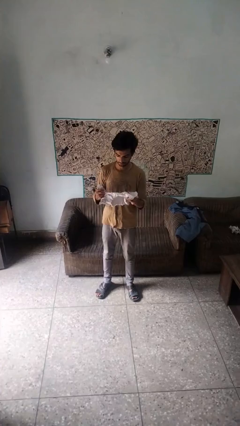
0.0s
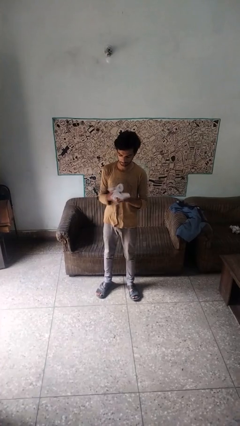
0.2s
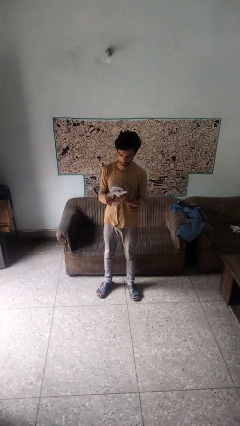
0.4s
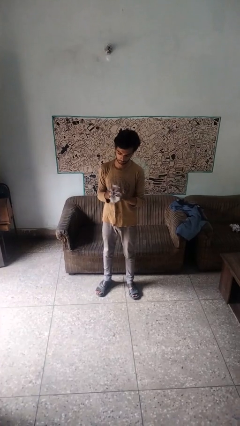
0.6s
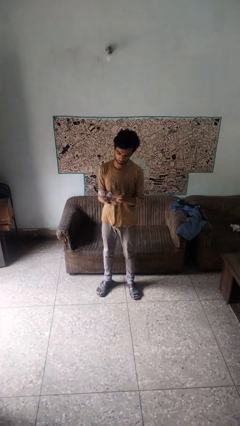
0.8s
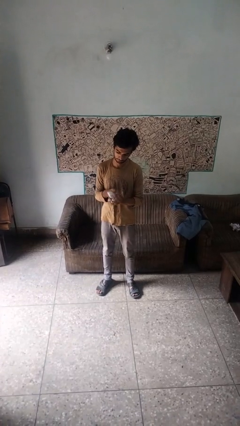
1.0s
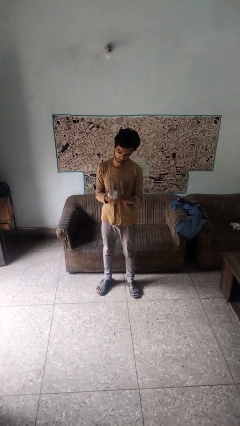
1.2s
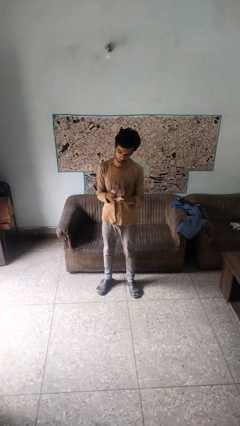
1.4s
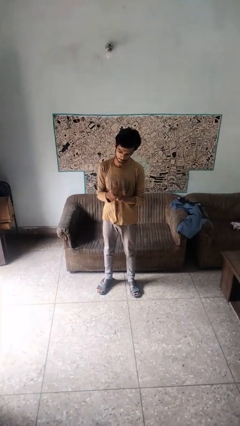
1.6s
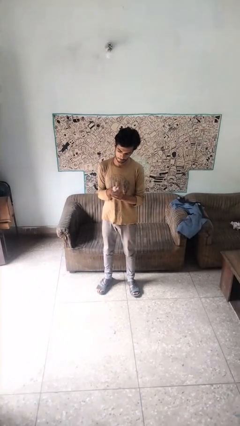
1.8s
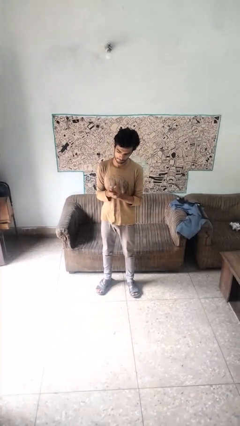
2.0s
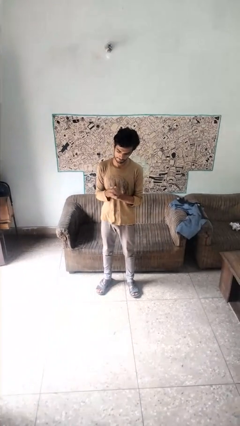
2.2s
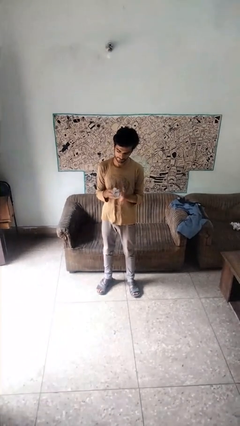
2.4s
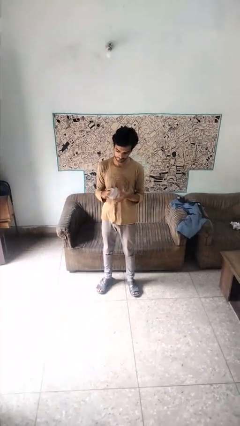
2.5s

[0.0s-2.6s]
person crumples paper

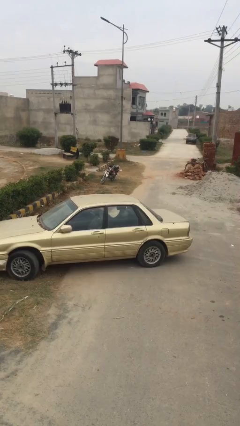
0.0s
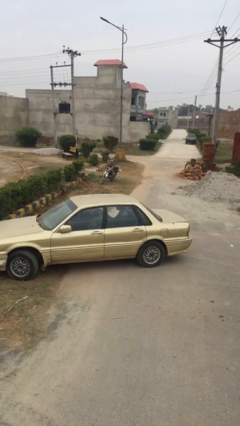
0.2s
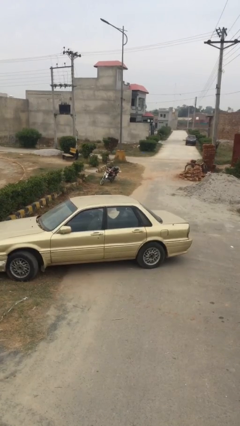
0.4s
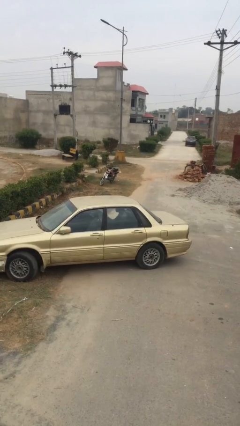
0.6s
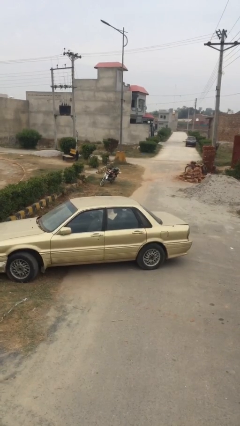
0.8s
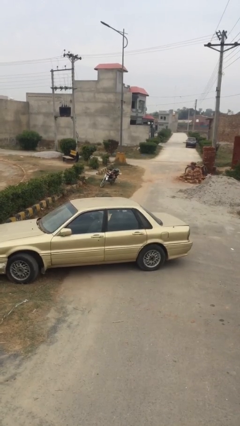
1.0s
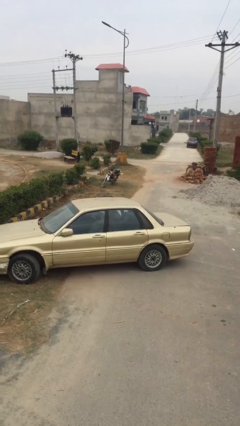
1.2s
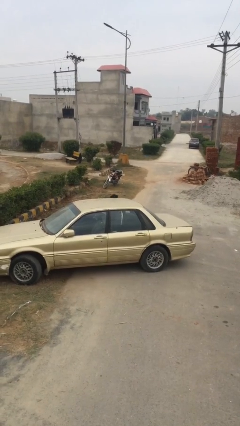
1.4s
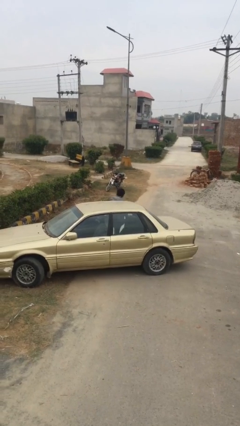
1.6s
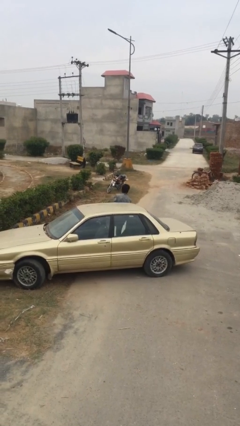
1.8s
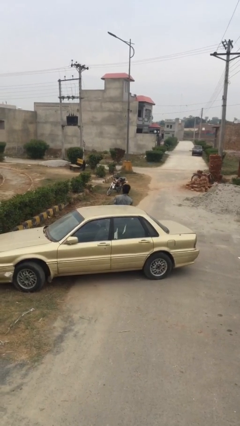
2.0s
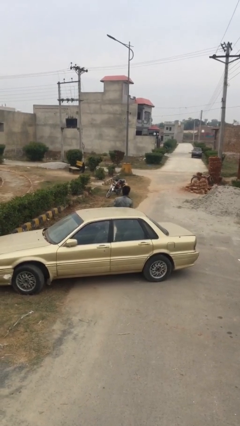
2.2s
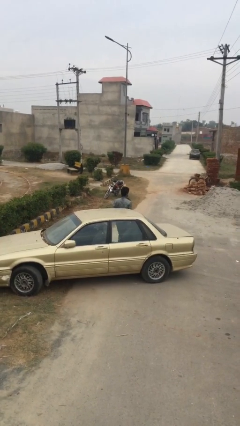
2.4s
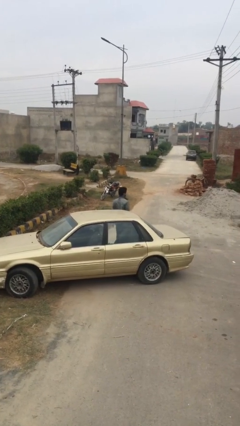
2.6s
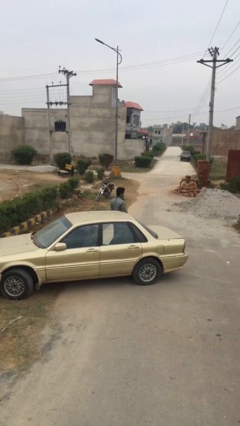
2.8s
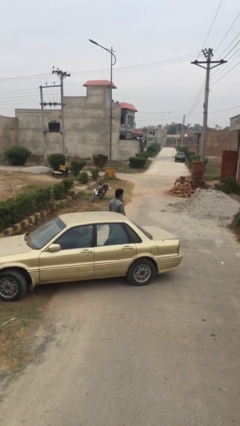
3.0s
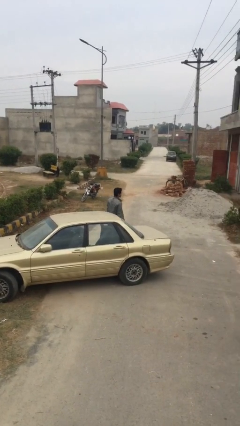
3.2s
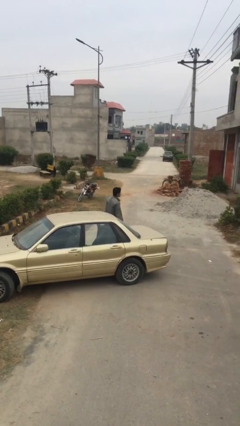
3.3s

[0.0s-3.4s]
person exits car

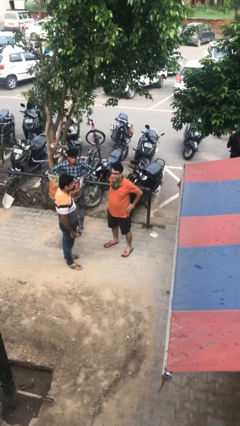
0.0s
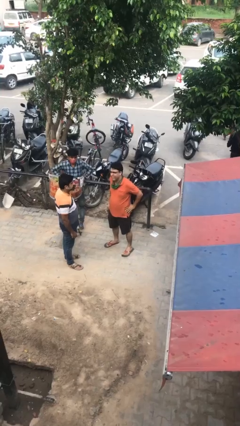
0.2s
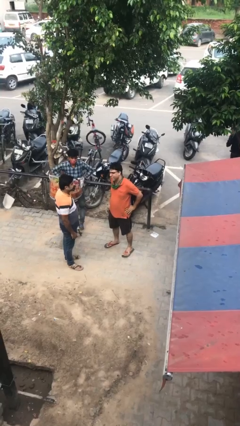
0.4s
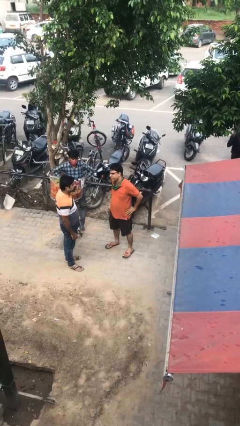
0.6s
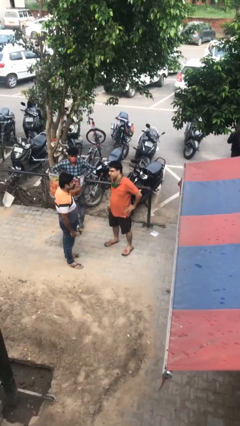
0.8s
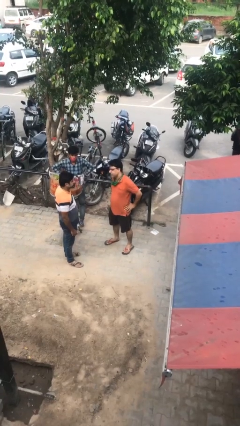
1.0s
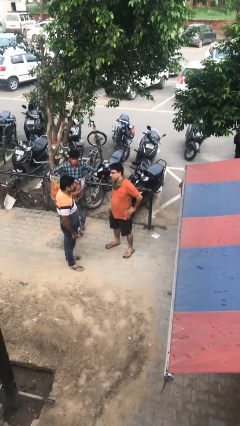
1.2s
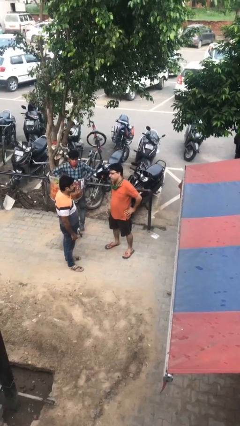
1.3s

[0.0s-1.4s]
person laughs with person

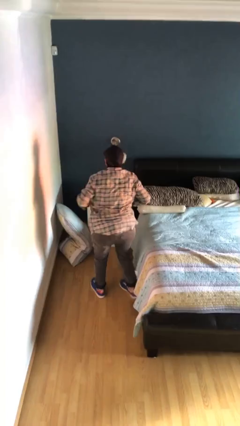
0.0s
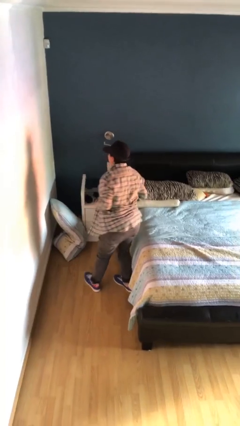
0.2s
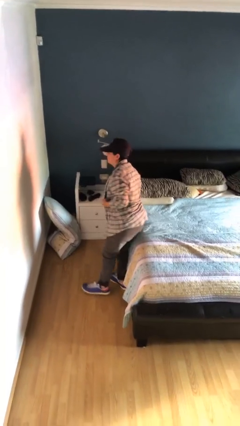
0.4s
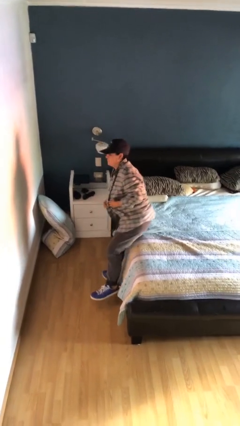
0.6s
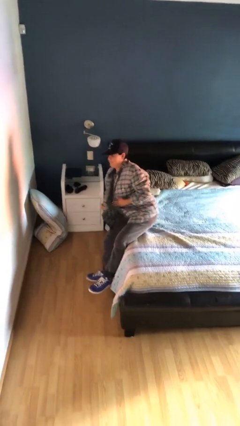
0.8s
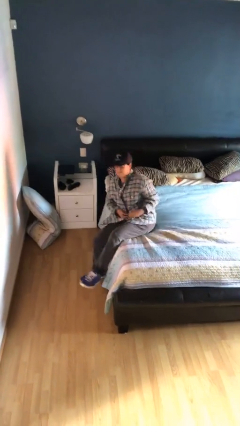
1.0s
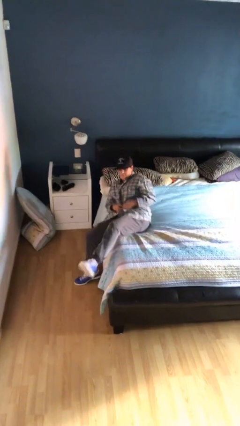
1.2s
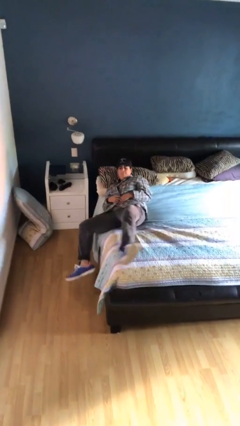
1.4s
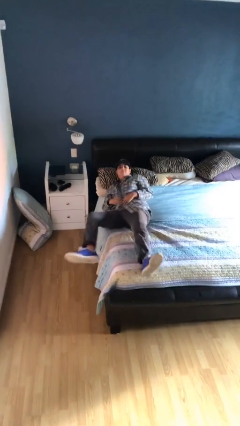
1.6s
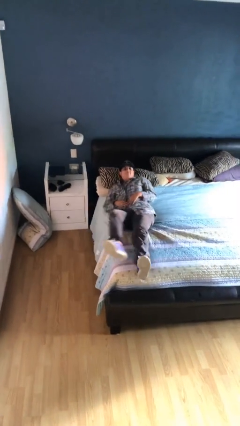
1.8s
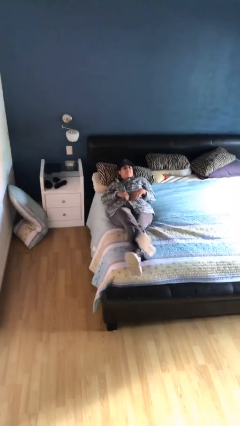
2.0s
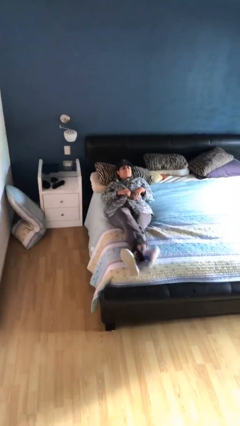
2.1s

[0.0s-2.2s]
person lies down on bed

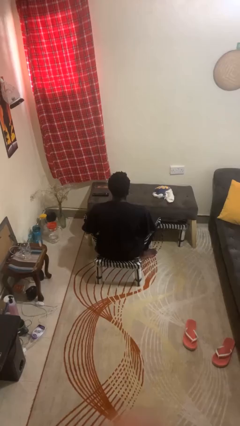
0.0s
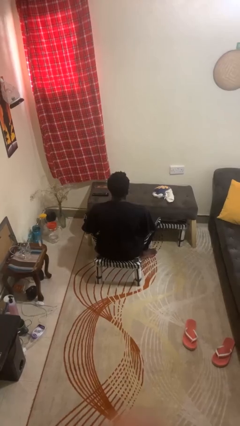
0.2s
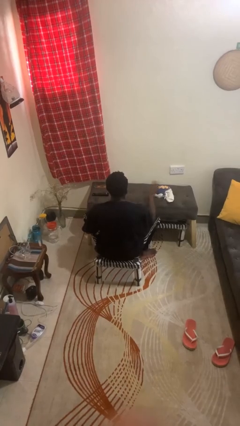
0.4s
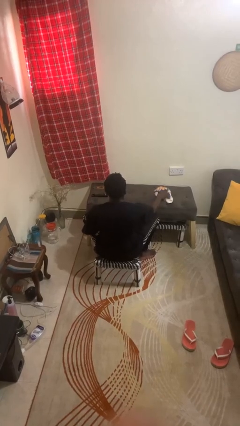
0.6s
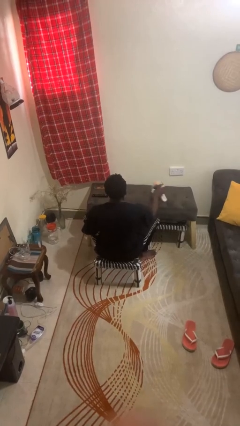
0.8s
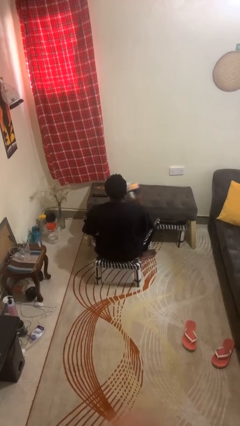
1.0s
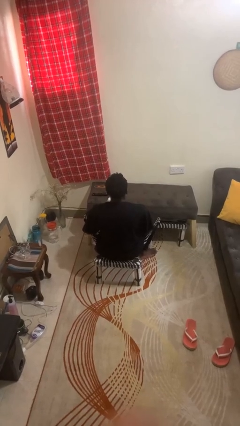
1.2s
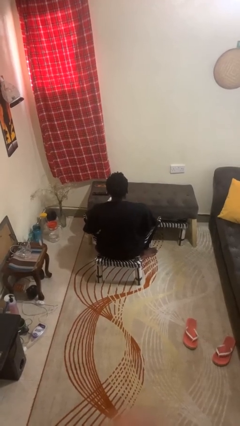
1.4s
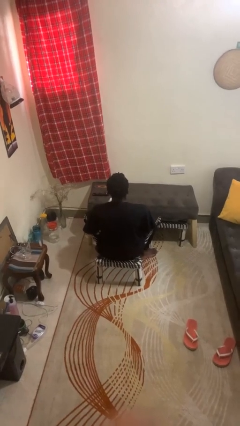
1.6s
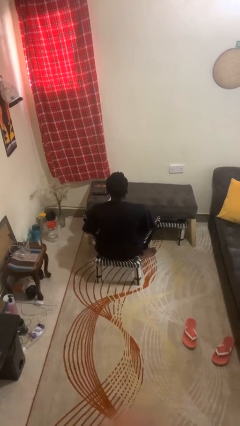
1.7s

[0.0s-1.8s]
person picks up object from table

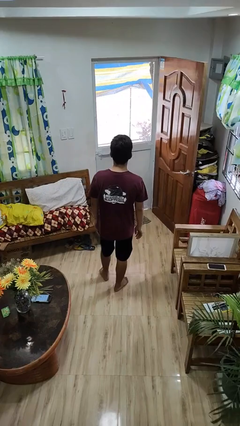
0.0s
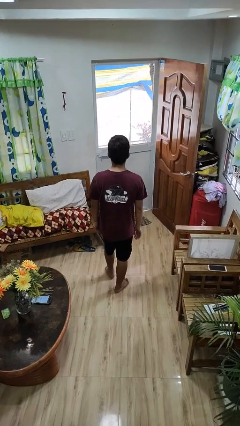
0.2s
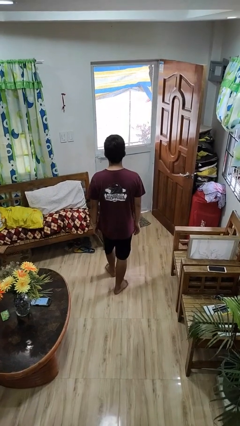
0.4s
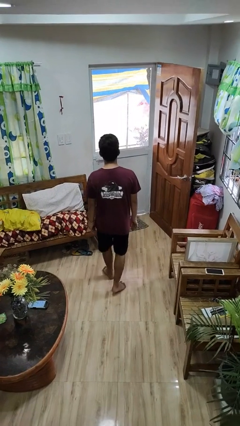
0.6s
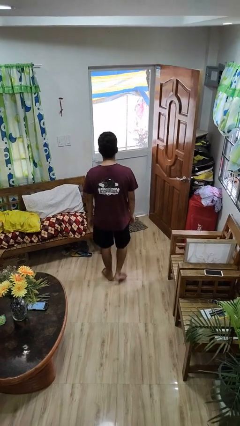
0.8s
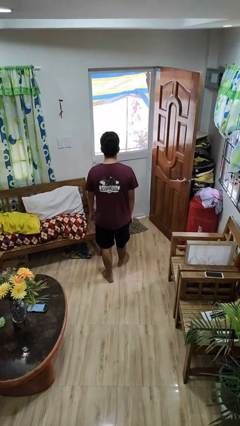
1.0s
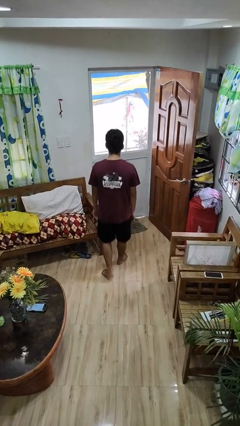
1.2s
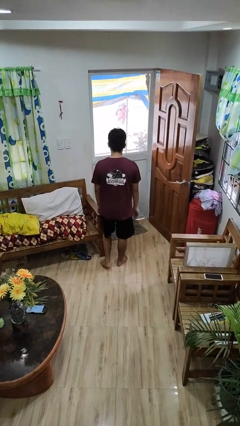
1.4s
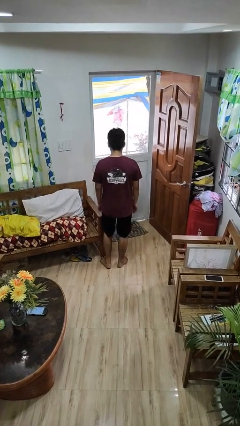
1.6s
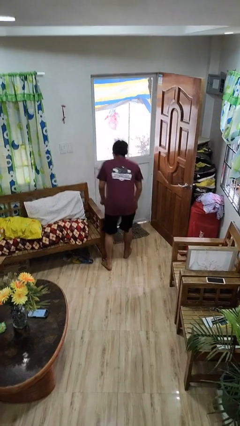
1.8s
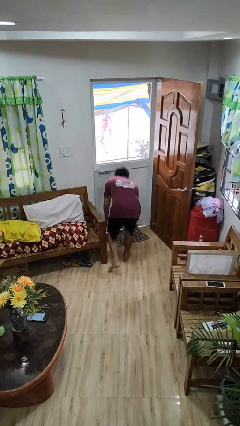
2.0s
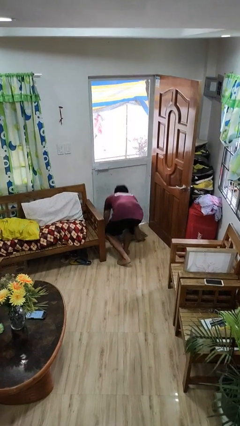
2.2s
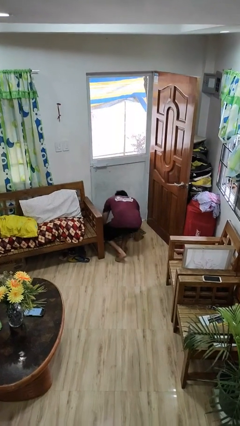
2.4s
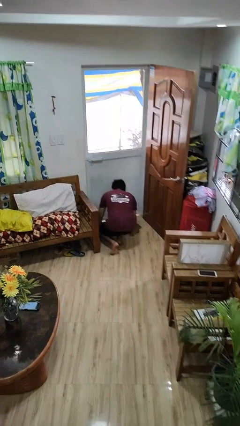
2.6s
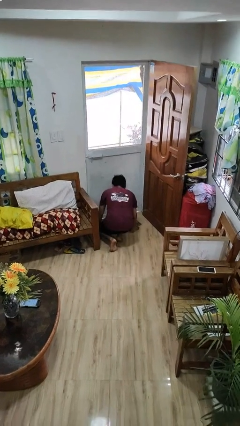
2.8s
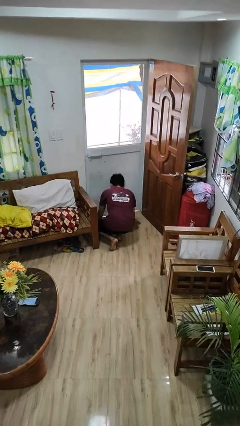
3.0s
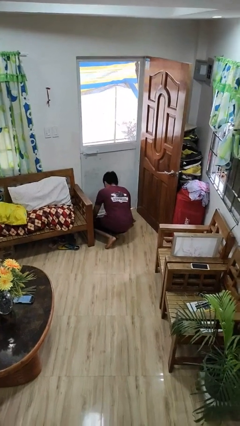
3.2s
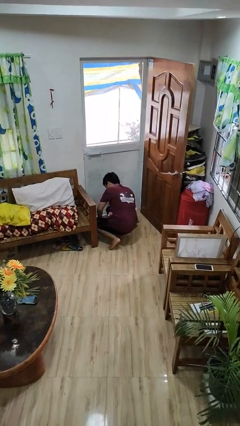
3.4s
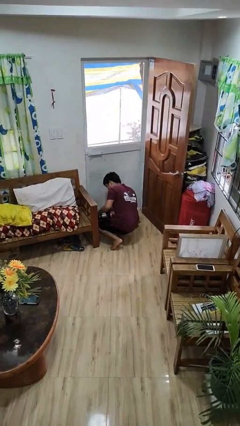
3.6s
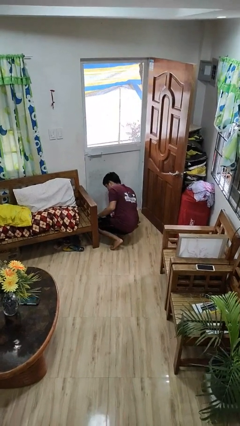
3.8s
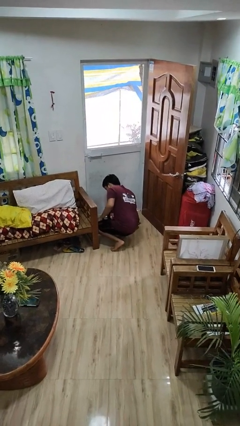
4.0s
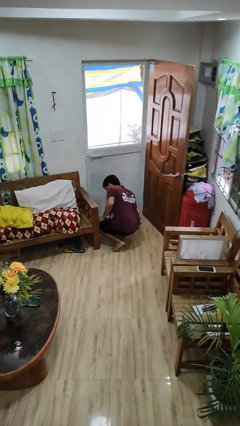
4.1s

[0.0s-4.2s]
person trips on object on floor

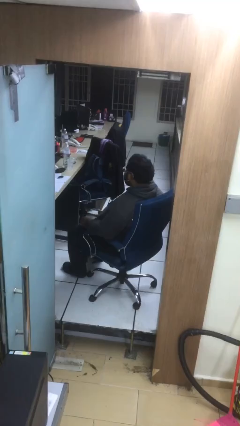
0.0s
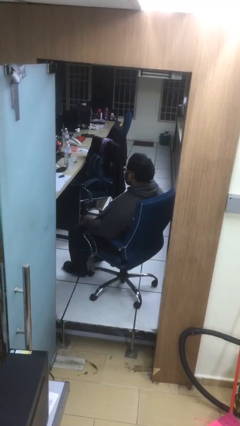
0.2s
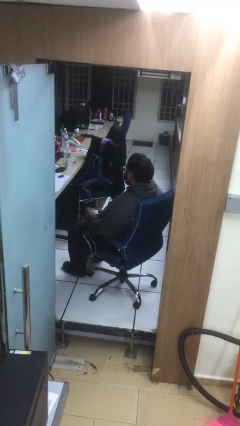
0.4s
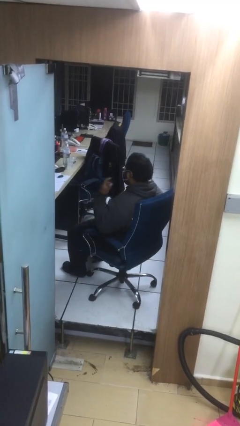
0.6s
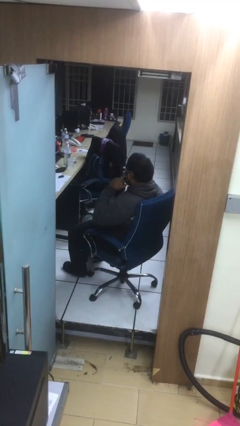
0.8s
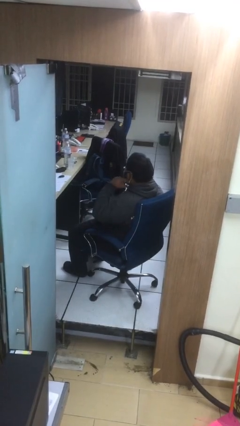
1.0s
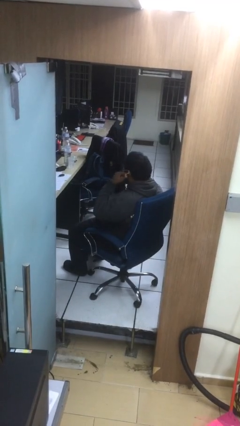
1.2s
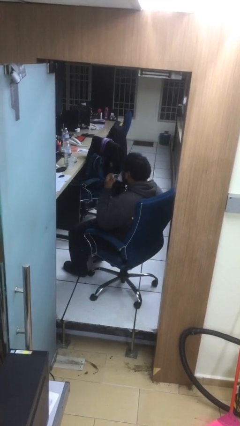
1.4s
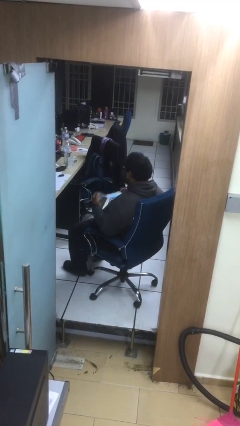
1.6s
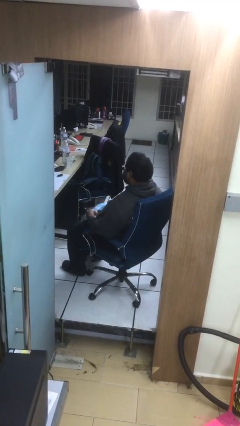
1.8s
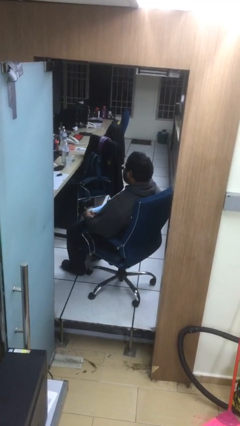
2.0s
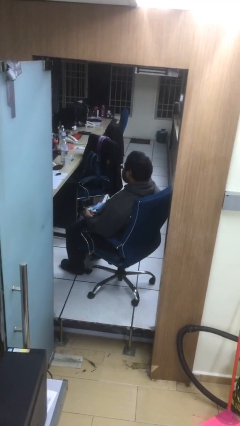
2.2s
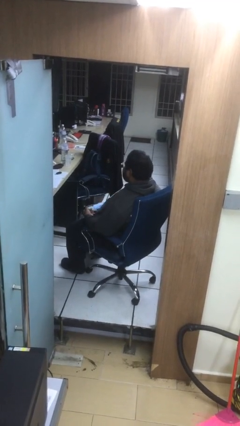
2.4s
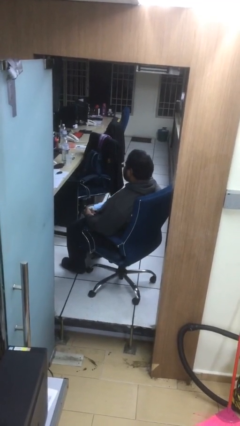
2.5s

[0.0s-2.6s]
person takes off facemask
